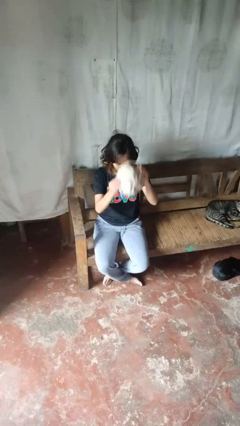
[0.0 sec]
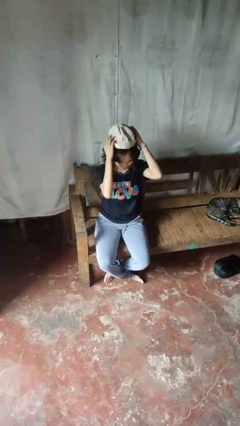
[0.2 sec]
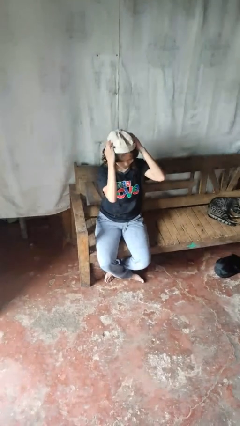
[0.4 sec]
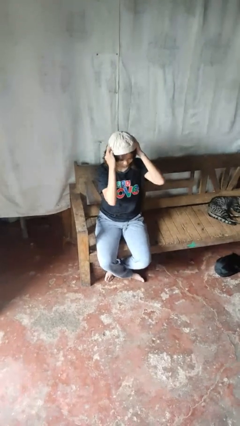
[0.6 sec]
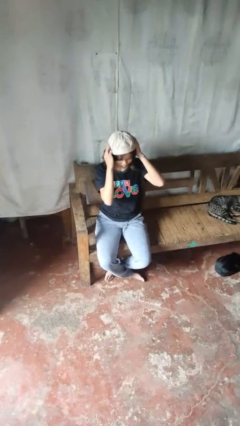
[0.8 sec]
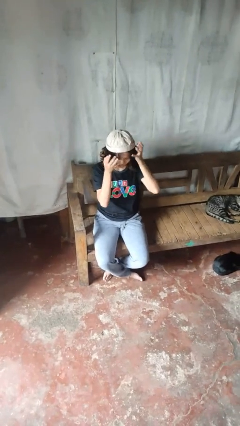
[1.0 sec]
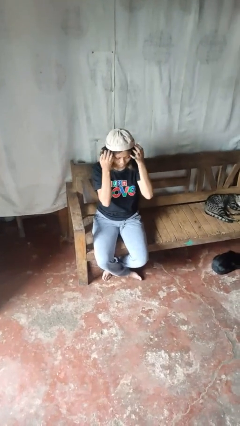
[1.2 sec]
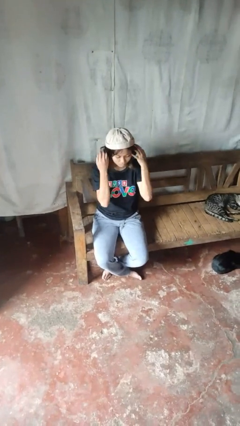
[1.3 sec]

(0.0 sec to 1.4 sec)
person puts on hat

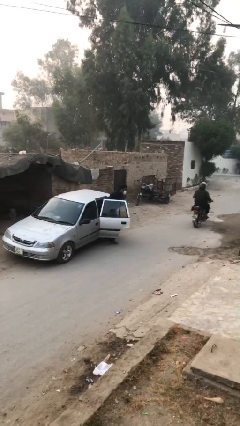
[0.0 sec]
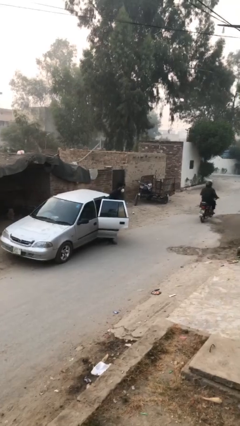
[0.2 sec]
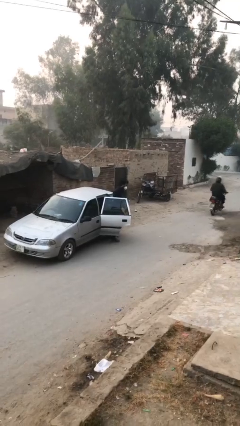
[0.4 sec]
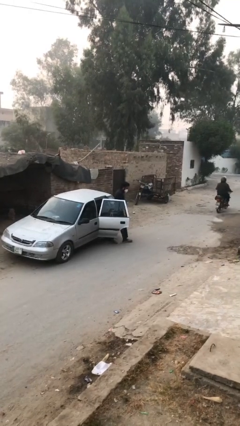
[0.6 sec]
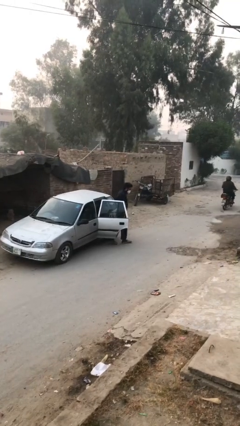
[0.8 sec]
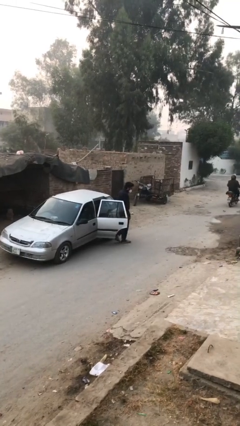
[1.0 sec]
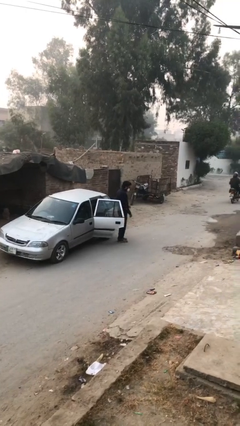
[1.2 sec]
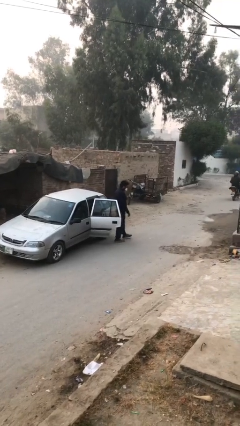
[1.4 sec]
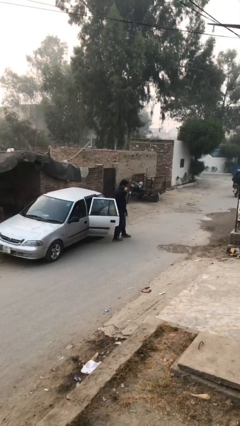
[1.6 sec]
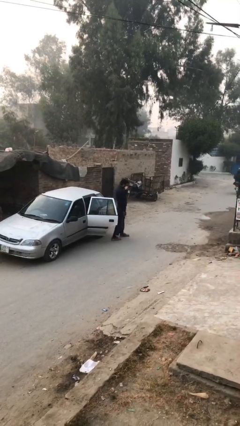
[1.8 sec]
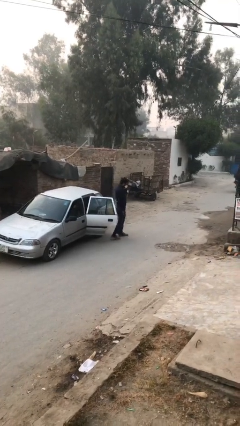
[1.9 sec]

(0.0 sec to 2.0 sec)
person exits car

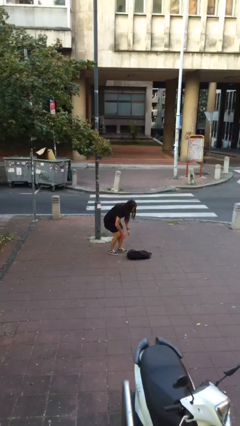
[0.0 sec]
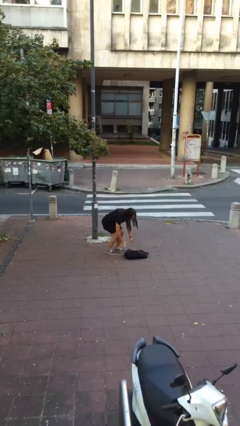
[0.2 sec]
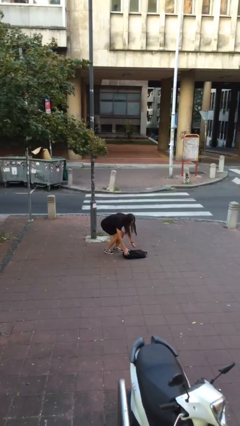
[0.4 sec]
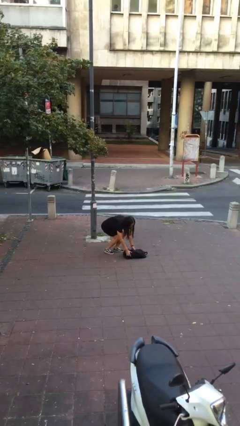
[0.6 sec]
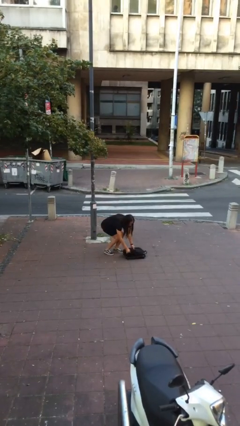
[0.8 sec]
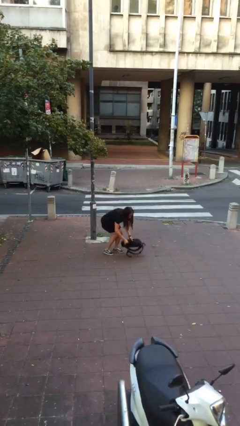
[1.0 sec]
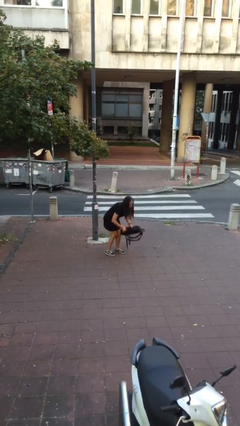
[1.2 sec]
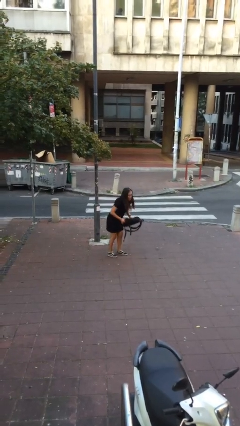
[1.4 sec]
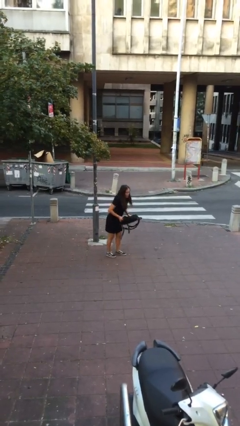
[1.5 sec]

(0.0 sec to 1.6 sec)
person picks up object from floor

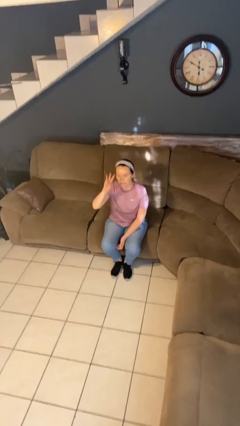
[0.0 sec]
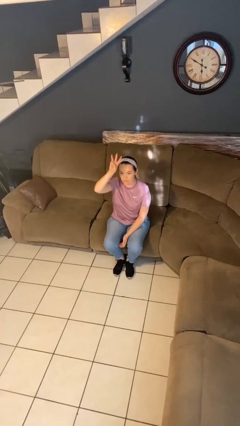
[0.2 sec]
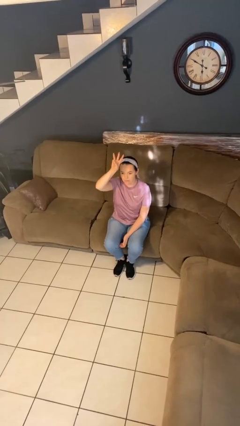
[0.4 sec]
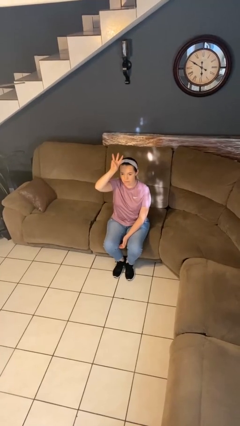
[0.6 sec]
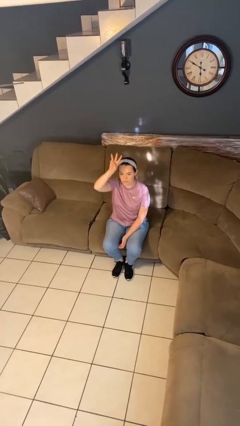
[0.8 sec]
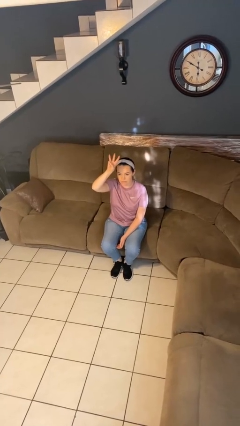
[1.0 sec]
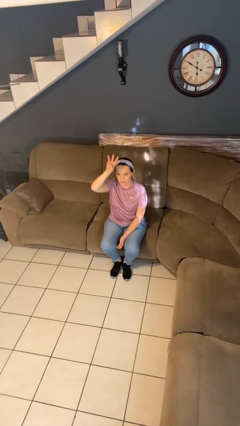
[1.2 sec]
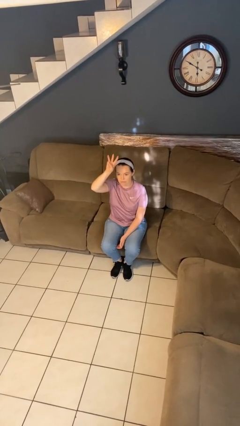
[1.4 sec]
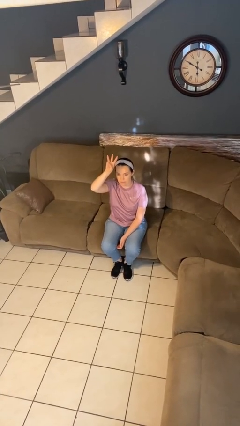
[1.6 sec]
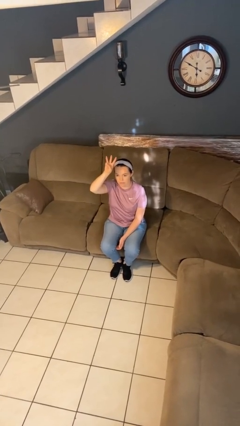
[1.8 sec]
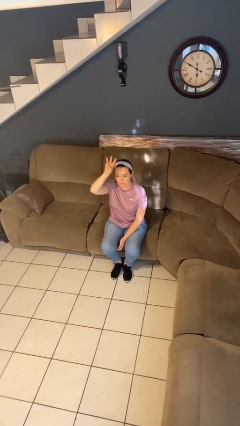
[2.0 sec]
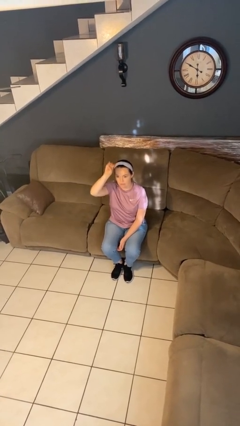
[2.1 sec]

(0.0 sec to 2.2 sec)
person gestures number three

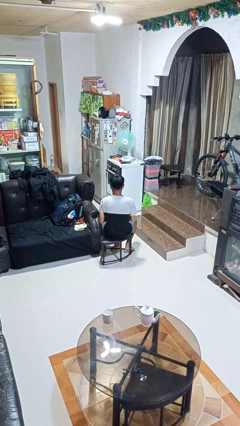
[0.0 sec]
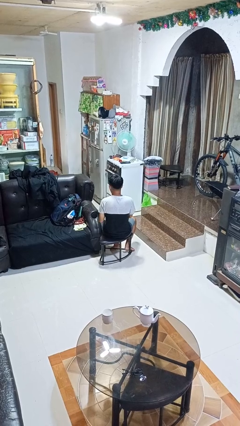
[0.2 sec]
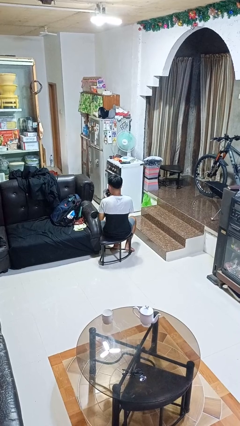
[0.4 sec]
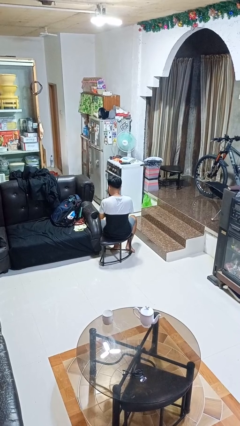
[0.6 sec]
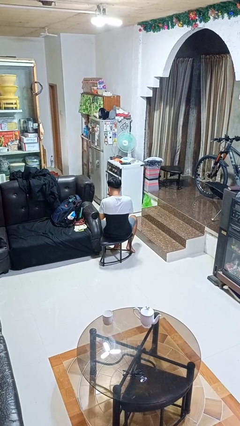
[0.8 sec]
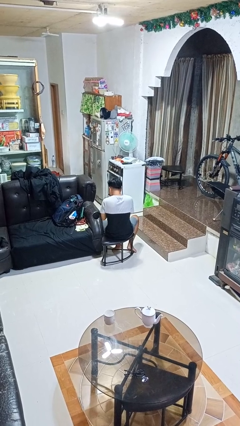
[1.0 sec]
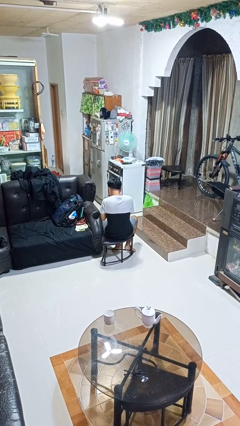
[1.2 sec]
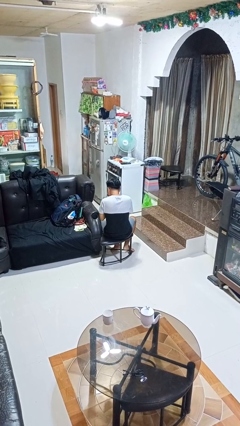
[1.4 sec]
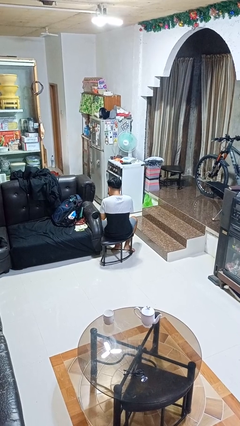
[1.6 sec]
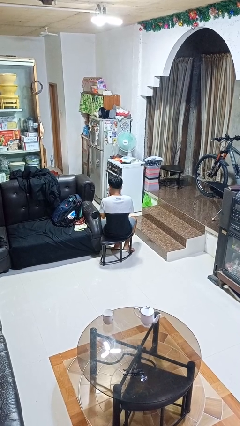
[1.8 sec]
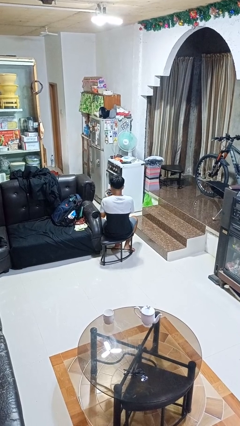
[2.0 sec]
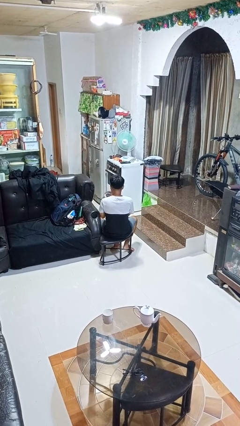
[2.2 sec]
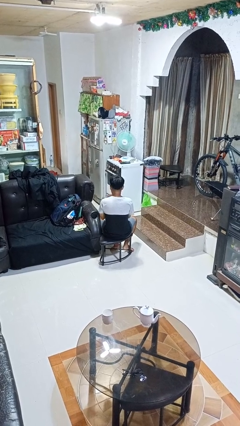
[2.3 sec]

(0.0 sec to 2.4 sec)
person blows nose

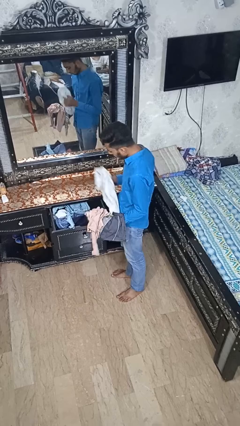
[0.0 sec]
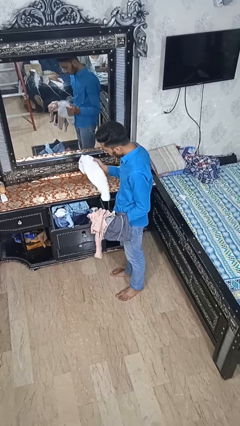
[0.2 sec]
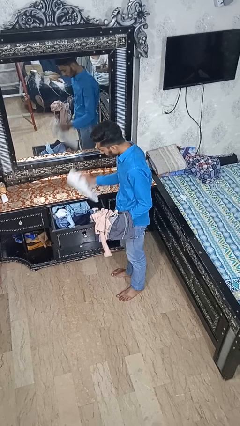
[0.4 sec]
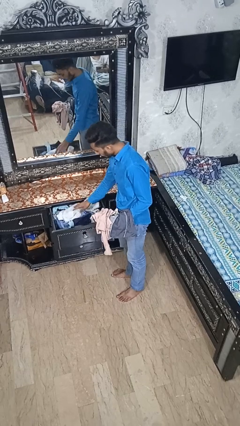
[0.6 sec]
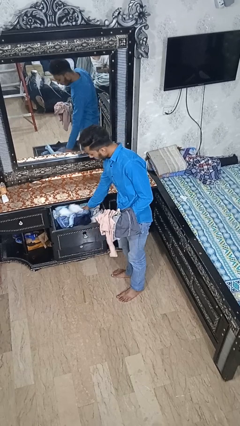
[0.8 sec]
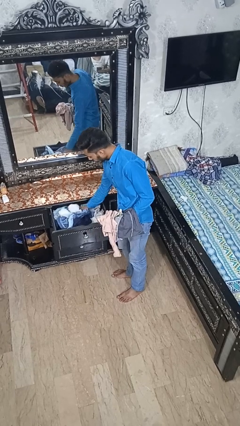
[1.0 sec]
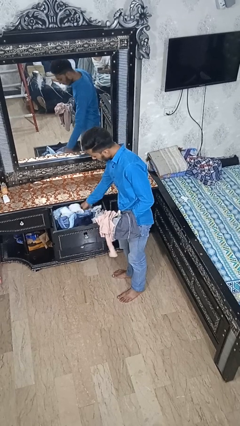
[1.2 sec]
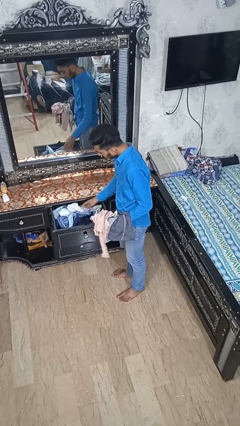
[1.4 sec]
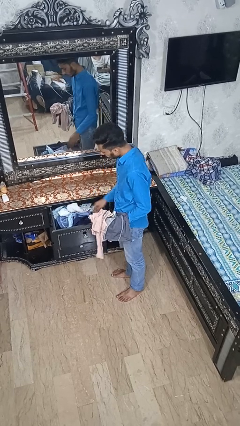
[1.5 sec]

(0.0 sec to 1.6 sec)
person puts clothes into dresser

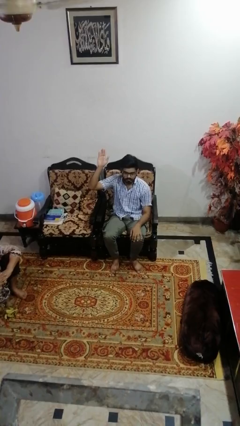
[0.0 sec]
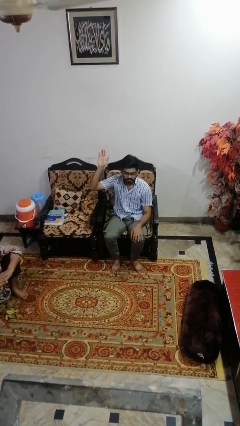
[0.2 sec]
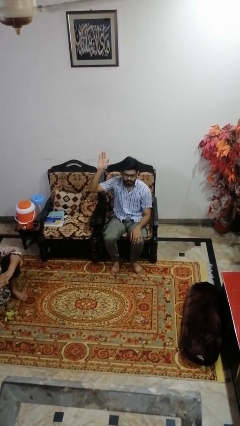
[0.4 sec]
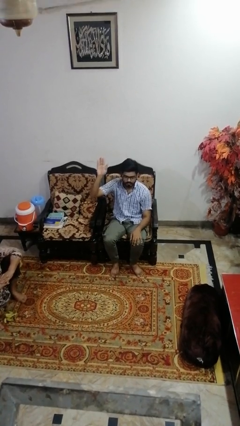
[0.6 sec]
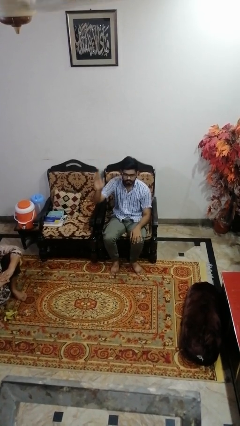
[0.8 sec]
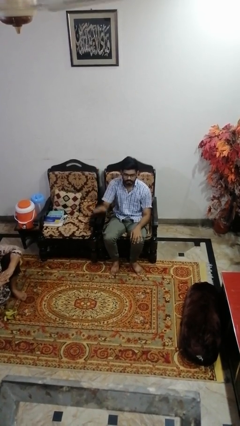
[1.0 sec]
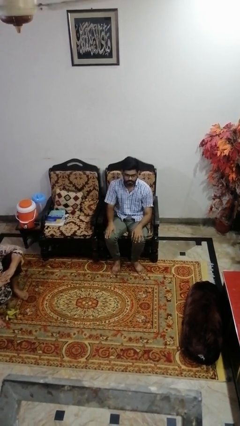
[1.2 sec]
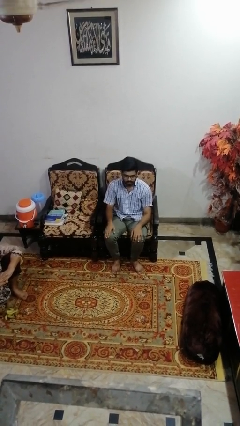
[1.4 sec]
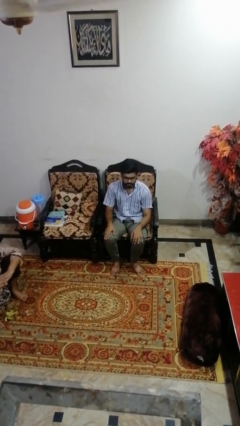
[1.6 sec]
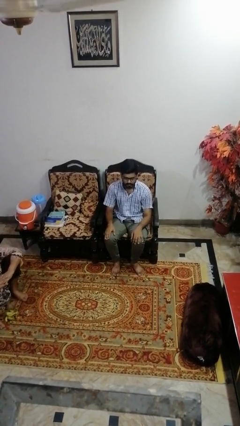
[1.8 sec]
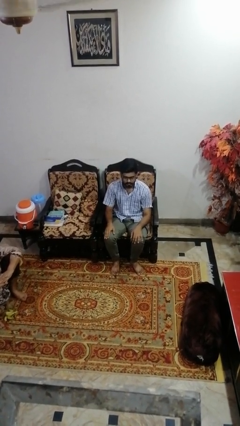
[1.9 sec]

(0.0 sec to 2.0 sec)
person gestures lower hand

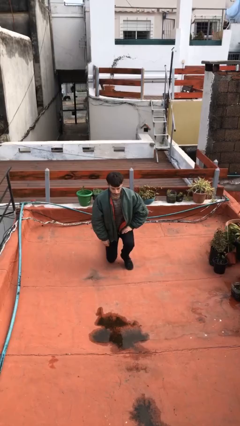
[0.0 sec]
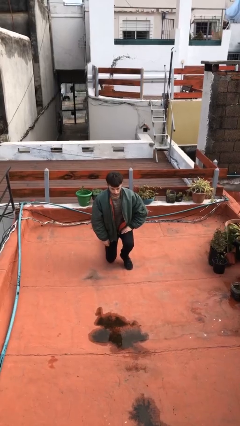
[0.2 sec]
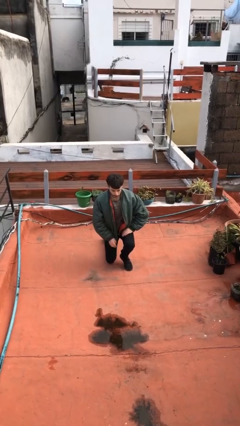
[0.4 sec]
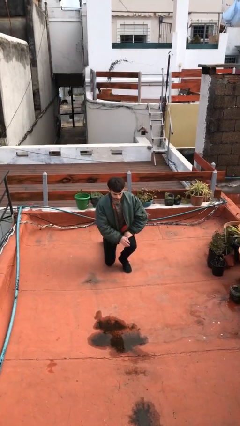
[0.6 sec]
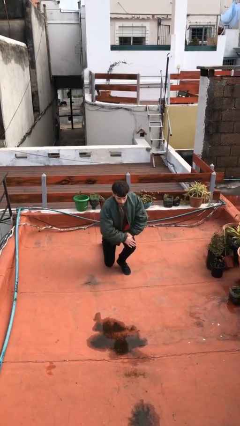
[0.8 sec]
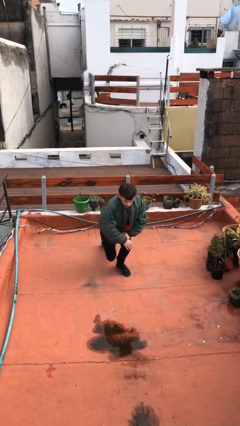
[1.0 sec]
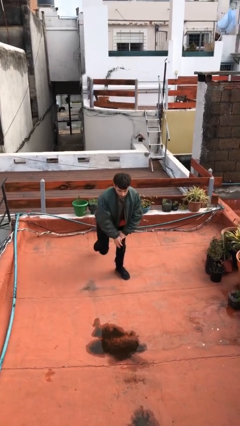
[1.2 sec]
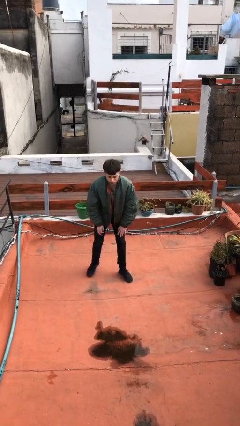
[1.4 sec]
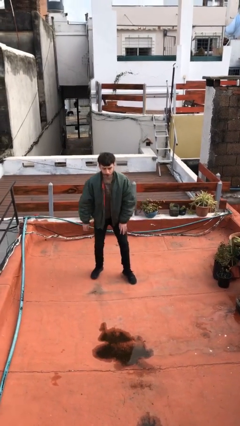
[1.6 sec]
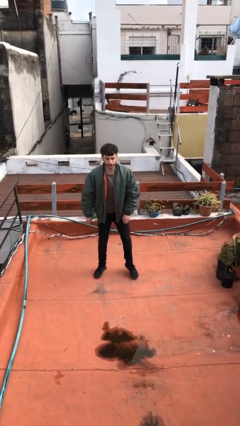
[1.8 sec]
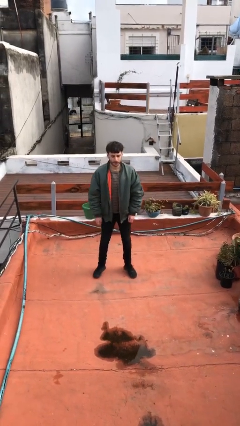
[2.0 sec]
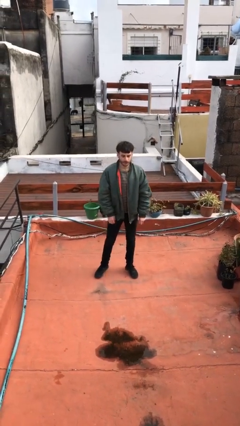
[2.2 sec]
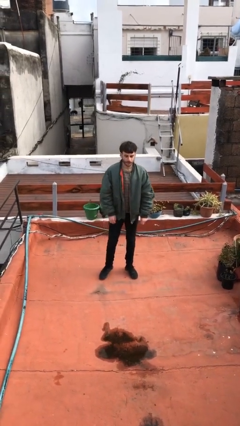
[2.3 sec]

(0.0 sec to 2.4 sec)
person stands up from floor

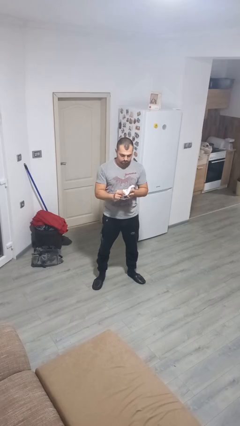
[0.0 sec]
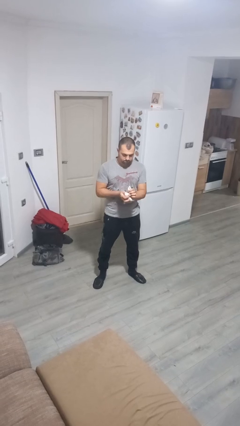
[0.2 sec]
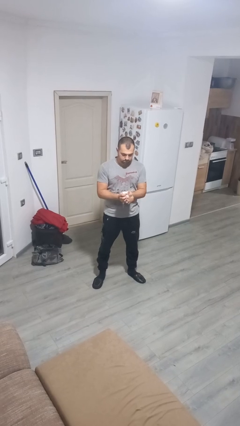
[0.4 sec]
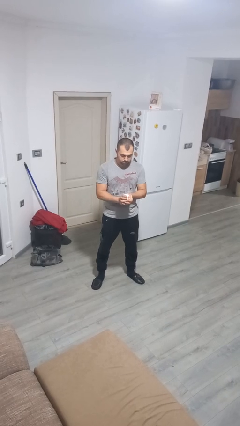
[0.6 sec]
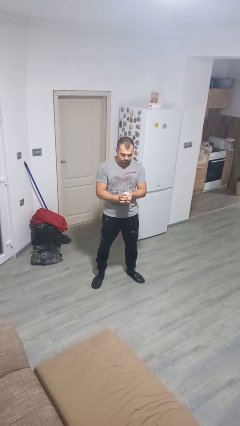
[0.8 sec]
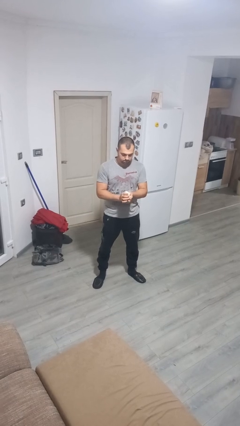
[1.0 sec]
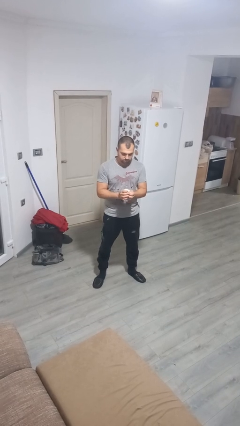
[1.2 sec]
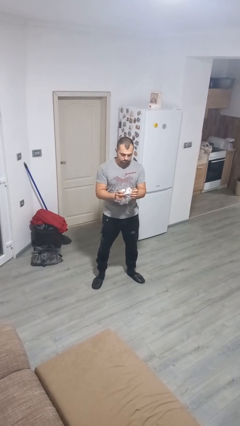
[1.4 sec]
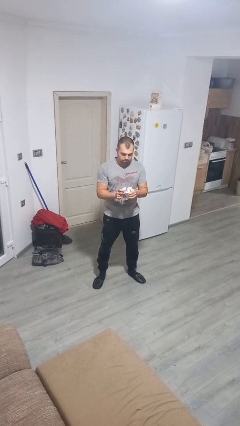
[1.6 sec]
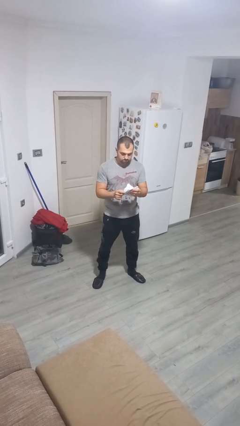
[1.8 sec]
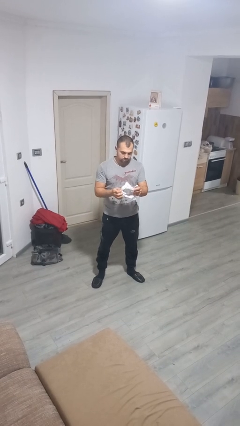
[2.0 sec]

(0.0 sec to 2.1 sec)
person crumples paper
